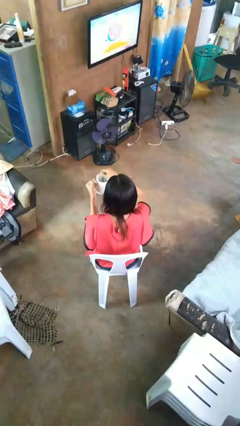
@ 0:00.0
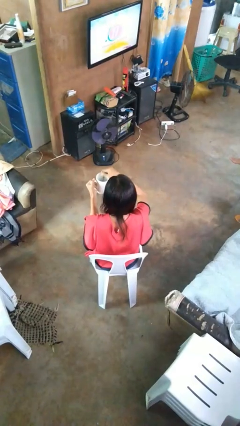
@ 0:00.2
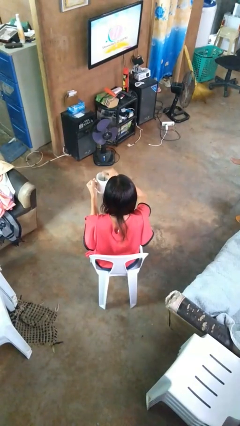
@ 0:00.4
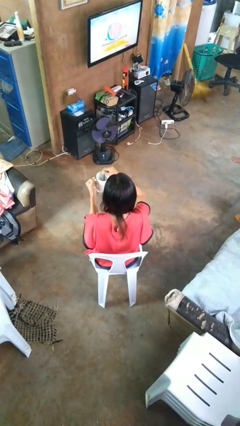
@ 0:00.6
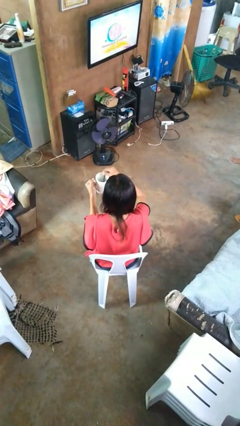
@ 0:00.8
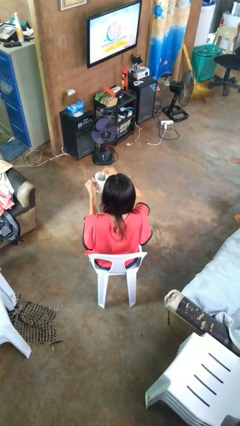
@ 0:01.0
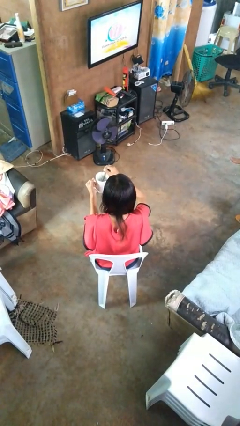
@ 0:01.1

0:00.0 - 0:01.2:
person stirs mug

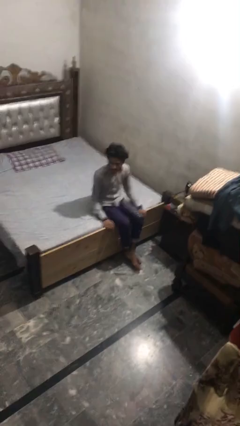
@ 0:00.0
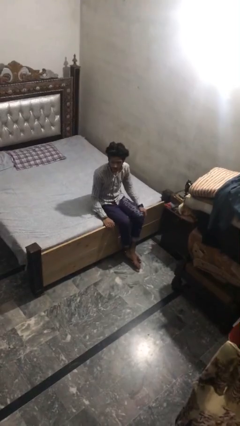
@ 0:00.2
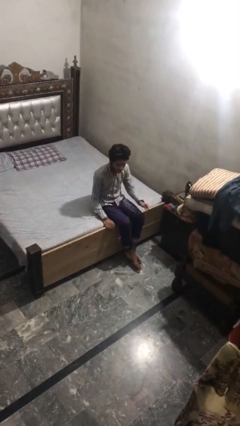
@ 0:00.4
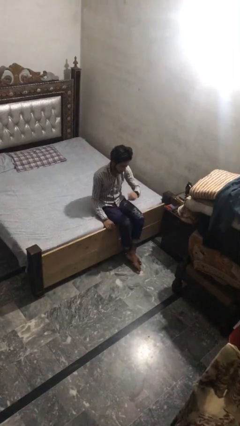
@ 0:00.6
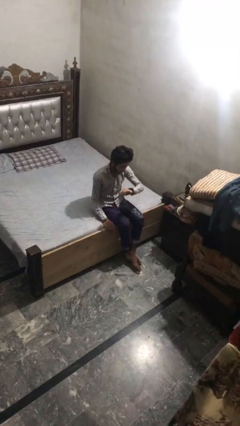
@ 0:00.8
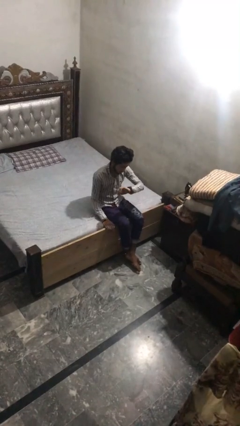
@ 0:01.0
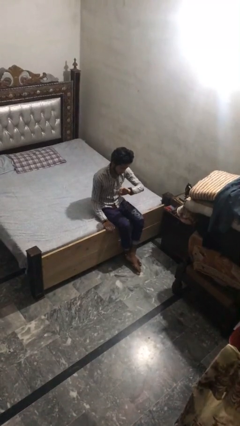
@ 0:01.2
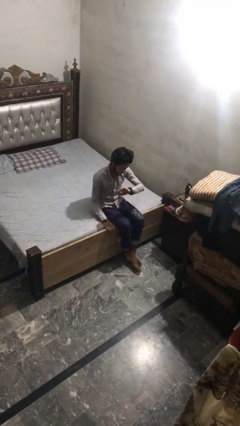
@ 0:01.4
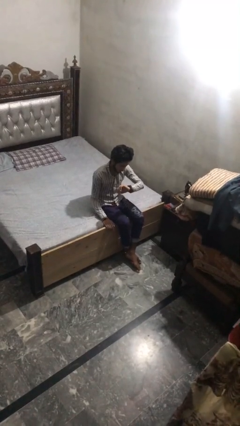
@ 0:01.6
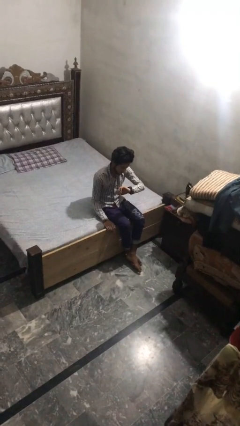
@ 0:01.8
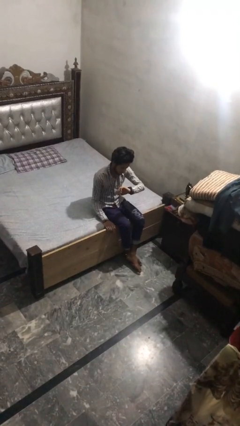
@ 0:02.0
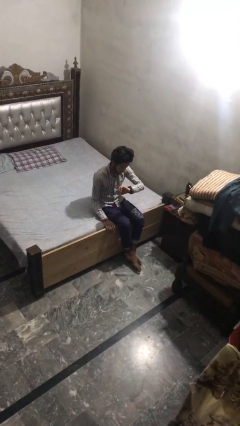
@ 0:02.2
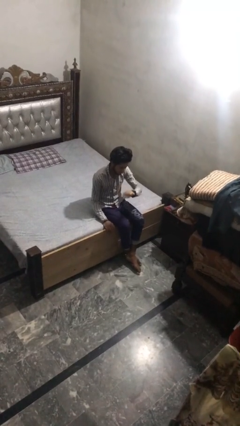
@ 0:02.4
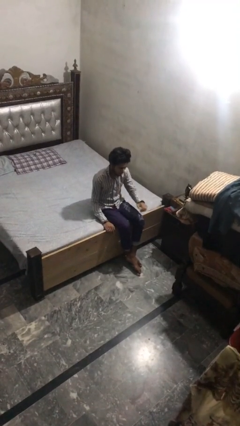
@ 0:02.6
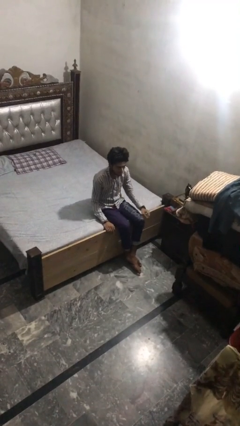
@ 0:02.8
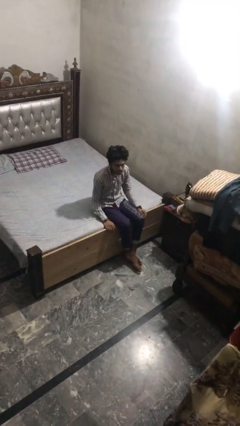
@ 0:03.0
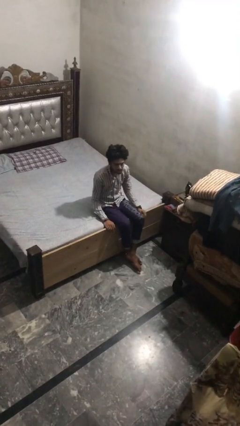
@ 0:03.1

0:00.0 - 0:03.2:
person looks at wristwatch

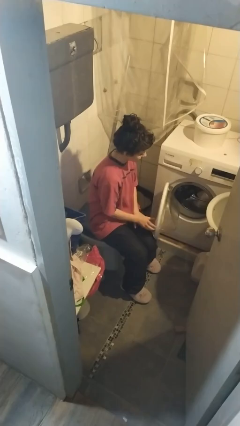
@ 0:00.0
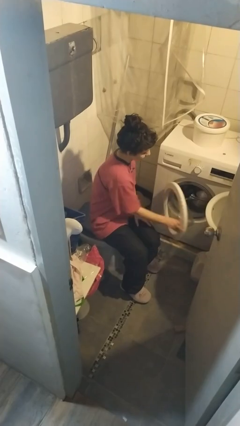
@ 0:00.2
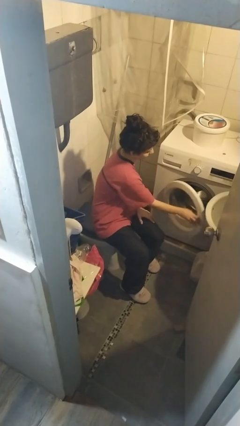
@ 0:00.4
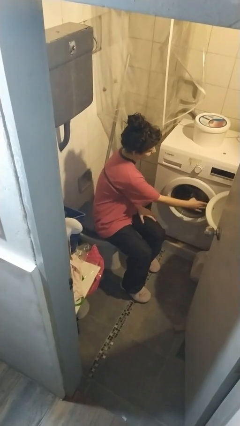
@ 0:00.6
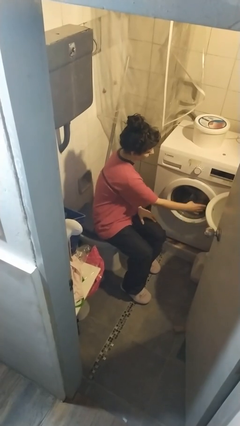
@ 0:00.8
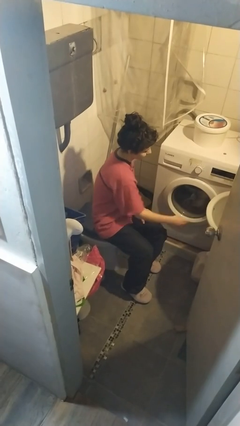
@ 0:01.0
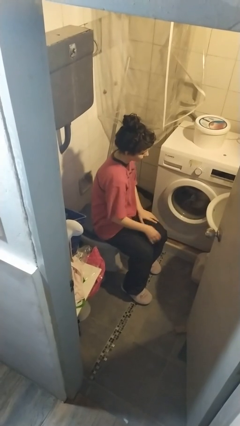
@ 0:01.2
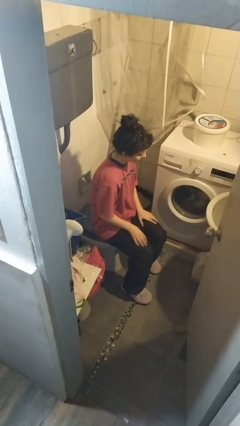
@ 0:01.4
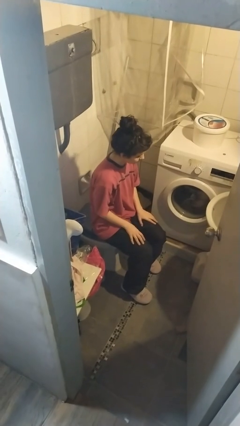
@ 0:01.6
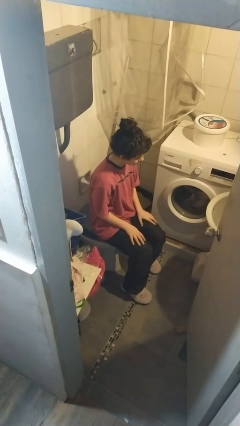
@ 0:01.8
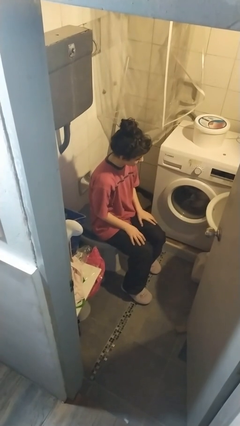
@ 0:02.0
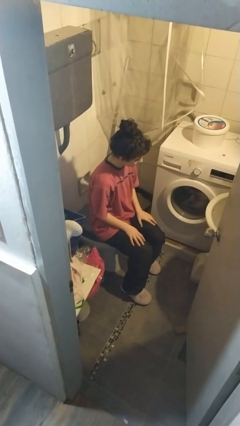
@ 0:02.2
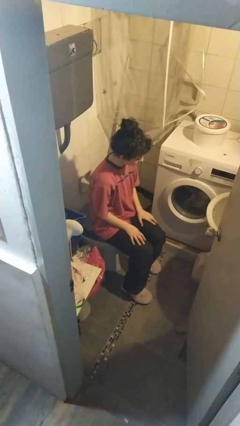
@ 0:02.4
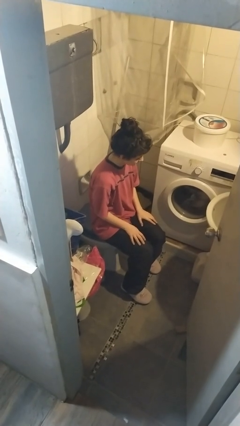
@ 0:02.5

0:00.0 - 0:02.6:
person closes clothes washer

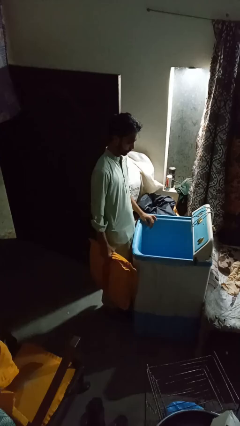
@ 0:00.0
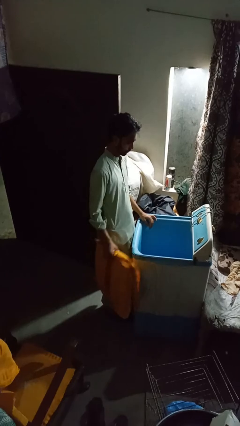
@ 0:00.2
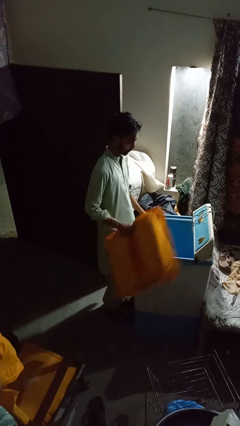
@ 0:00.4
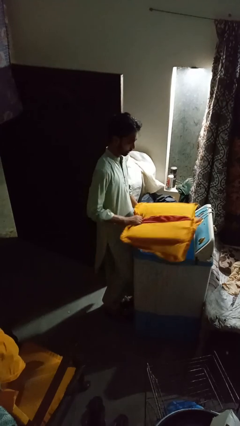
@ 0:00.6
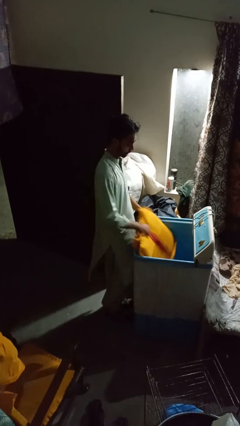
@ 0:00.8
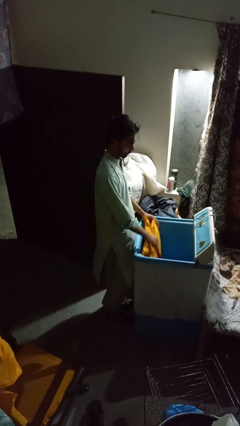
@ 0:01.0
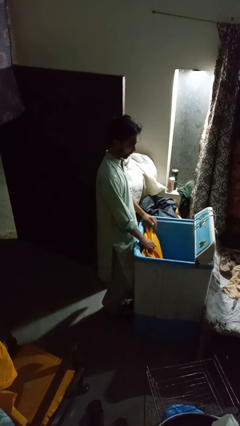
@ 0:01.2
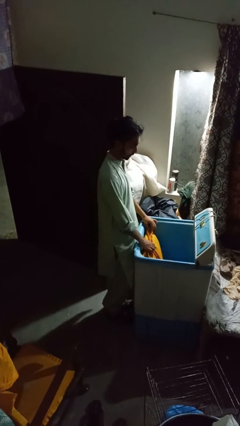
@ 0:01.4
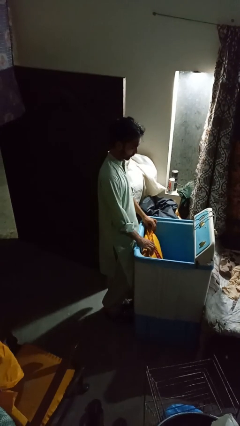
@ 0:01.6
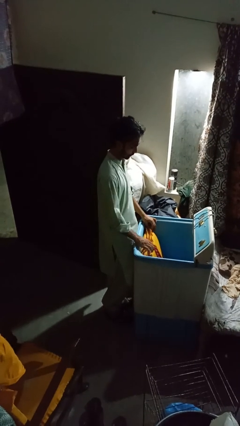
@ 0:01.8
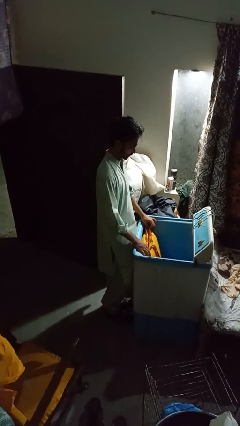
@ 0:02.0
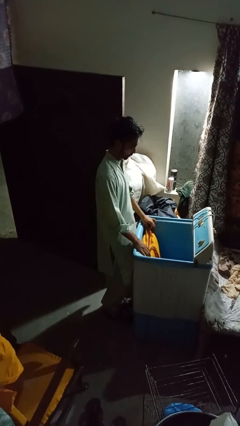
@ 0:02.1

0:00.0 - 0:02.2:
person loads clotheswasher

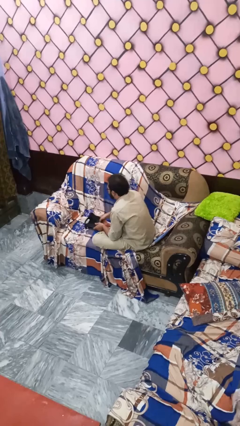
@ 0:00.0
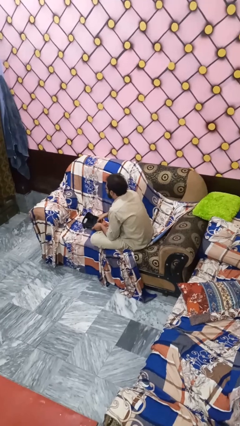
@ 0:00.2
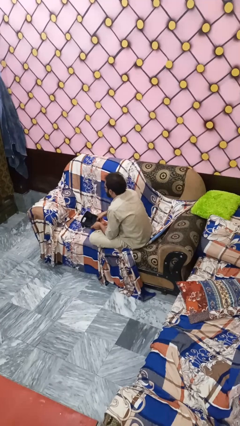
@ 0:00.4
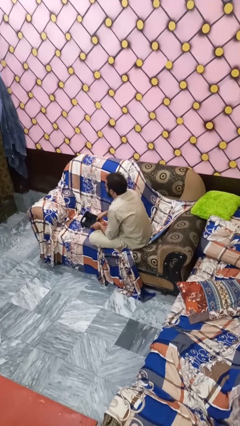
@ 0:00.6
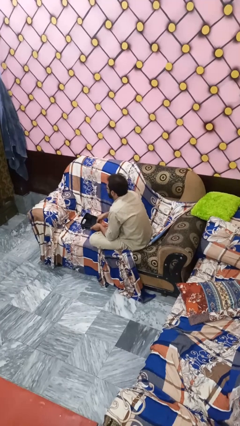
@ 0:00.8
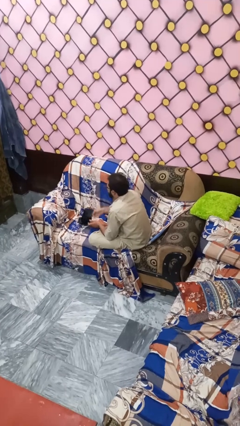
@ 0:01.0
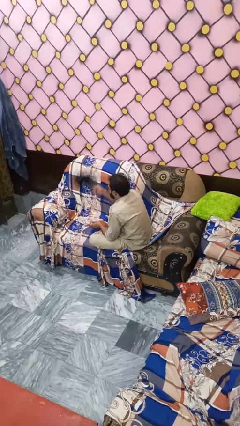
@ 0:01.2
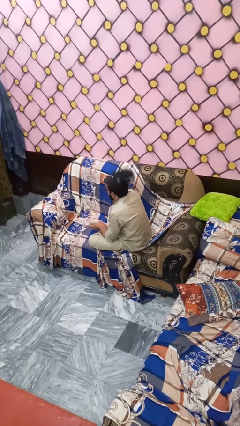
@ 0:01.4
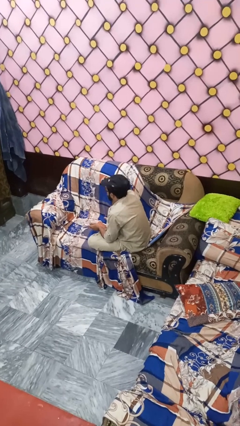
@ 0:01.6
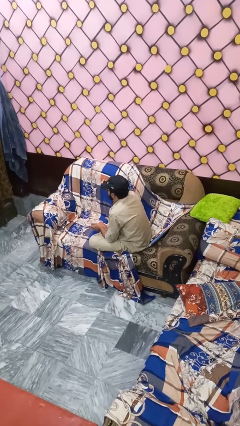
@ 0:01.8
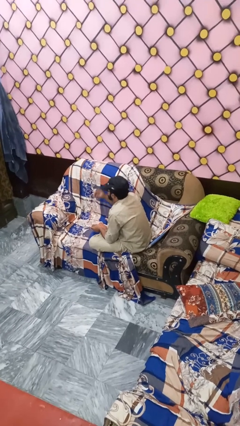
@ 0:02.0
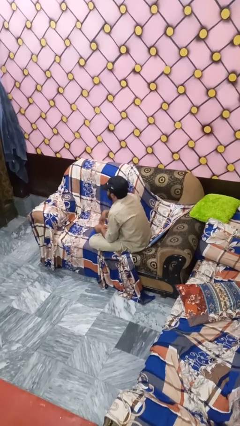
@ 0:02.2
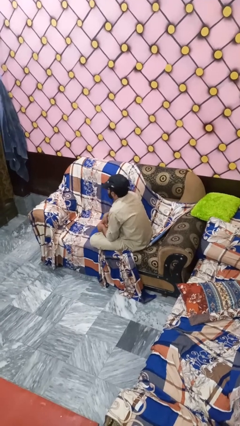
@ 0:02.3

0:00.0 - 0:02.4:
person holds object above head

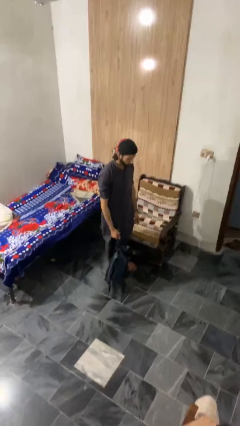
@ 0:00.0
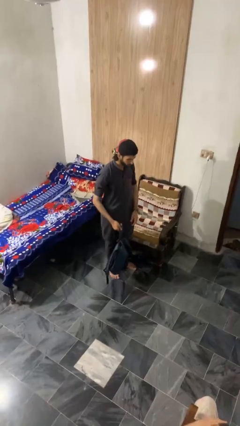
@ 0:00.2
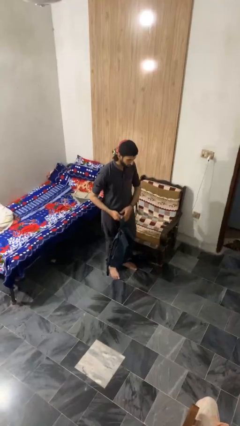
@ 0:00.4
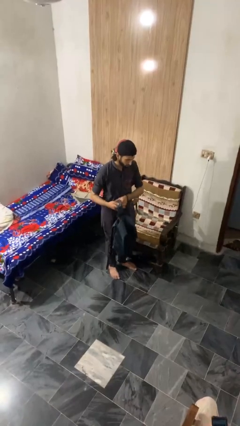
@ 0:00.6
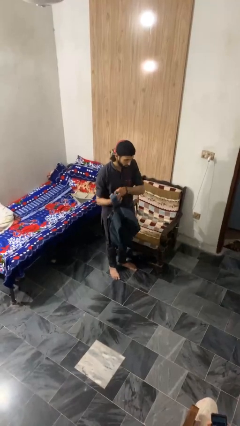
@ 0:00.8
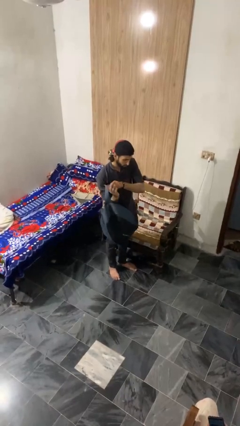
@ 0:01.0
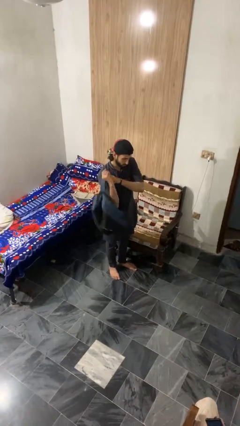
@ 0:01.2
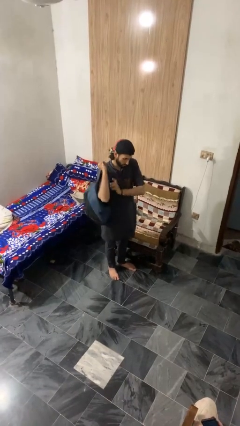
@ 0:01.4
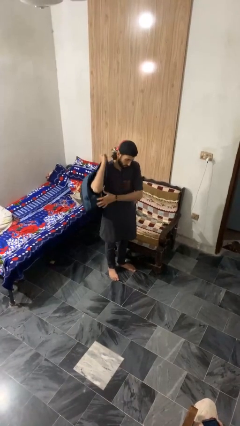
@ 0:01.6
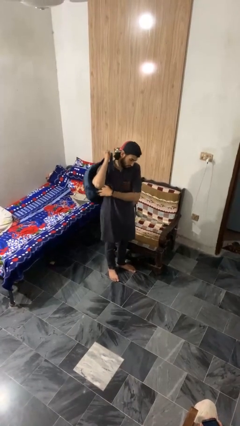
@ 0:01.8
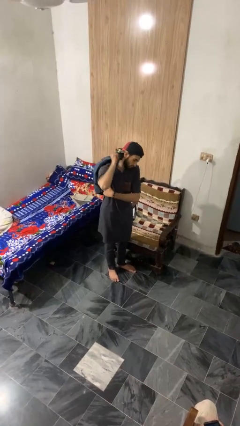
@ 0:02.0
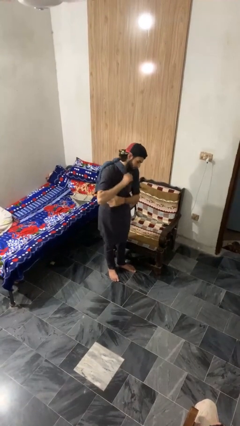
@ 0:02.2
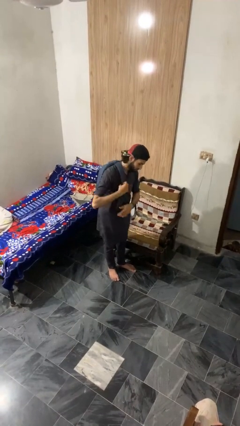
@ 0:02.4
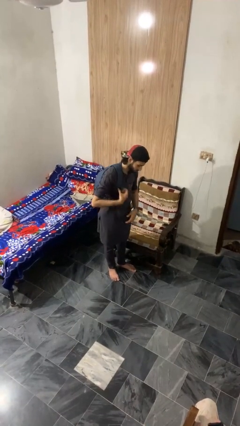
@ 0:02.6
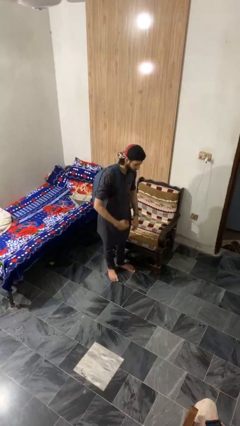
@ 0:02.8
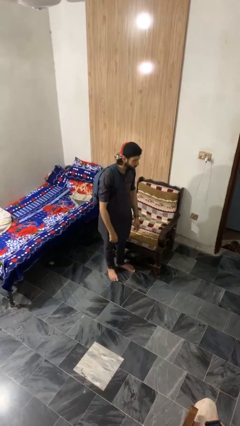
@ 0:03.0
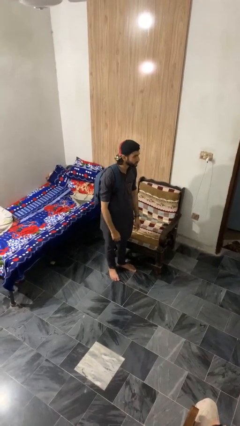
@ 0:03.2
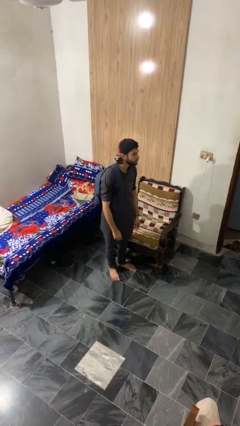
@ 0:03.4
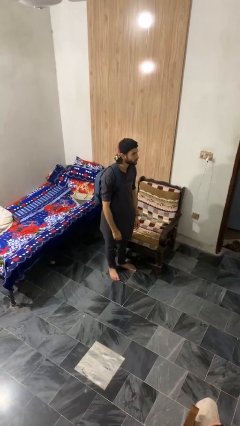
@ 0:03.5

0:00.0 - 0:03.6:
person puts on backpack

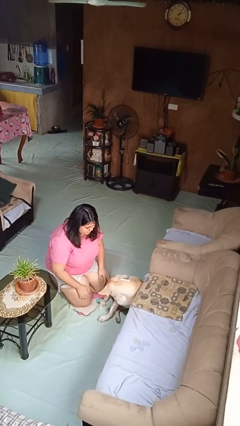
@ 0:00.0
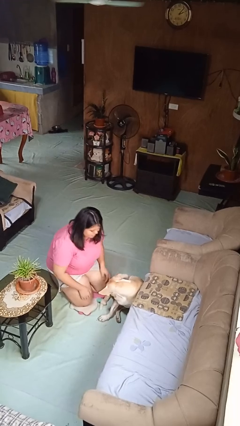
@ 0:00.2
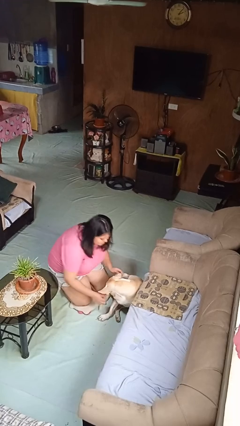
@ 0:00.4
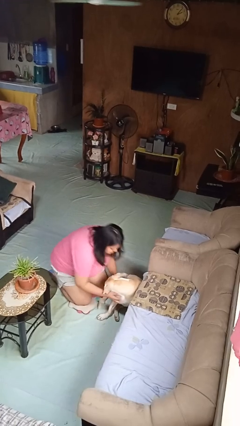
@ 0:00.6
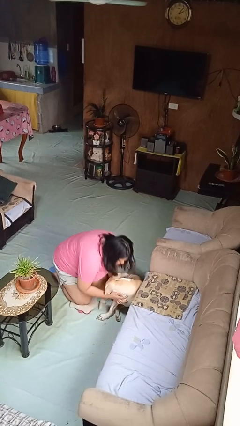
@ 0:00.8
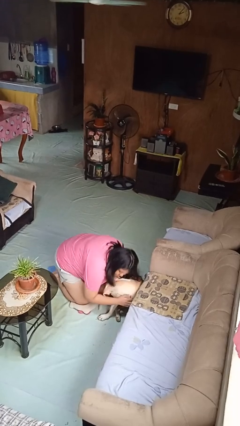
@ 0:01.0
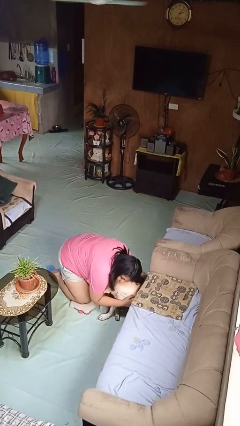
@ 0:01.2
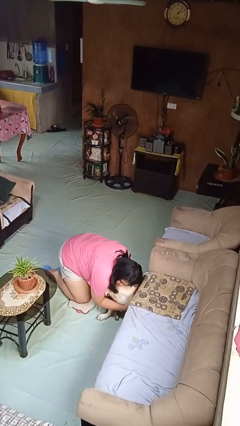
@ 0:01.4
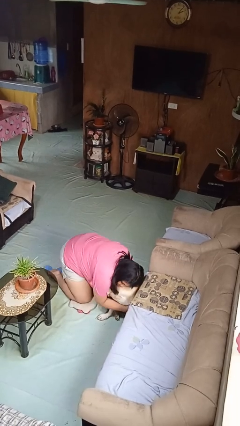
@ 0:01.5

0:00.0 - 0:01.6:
person hugs dog

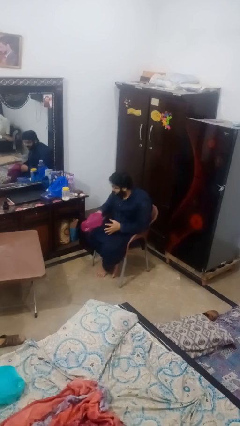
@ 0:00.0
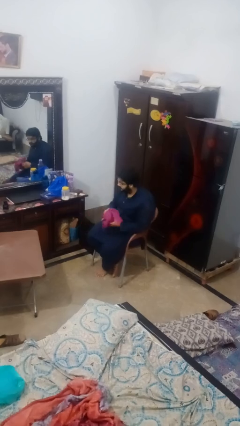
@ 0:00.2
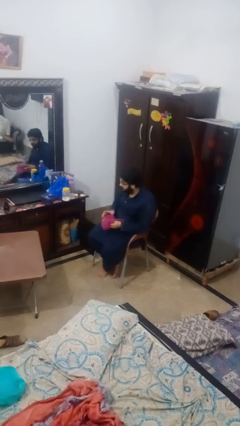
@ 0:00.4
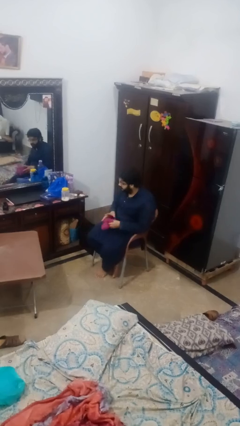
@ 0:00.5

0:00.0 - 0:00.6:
person puts clothes into dresser
